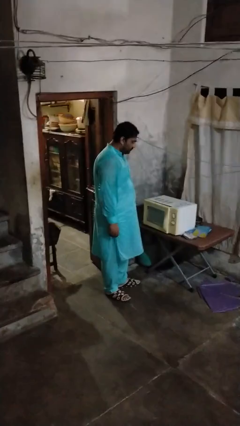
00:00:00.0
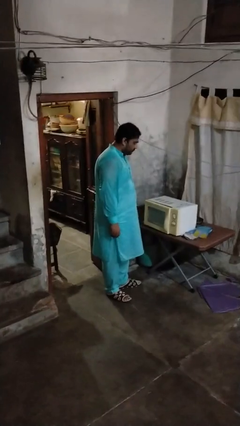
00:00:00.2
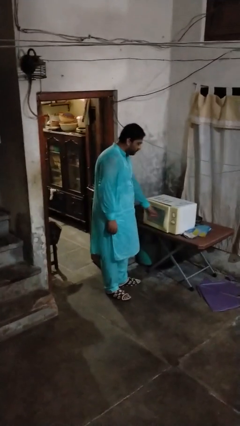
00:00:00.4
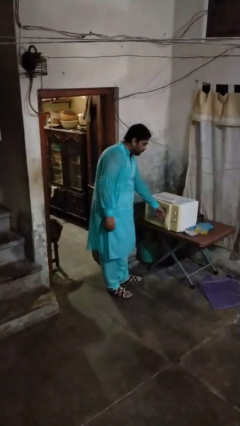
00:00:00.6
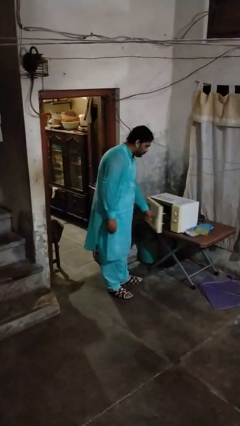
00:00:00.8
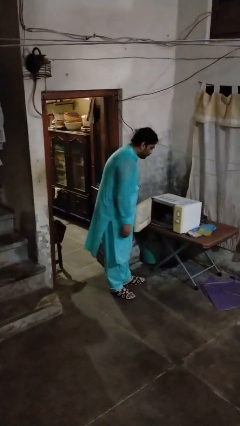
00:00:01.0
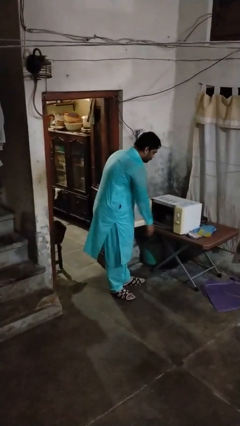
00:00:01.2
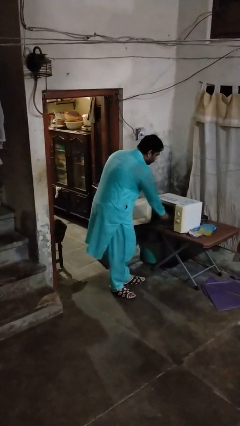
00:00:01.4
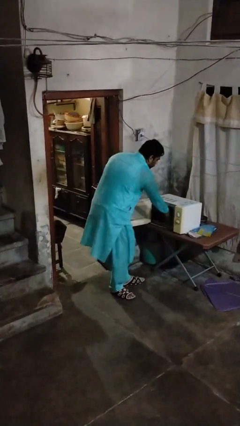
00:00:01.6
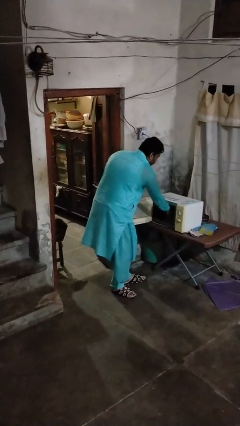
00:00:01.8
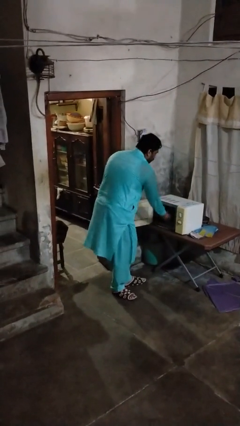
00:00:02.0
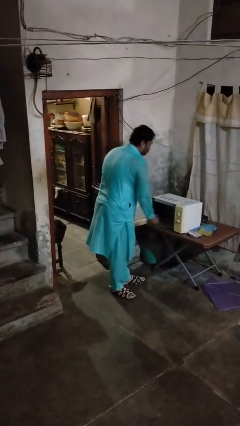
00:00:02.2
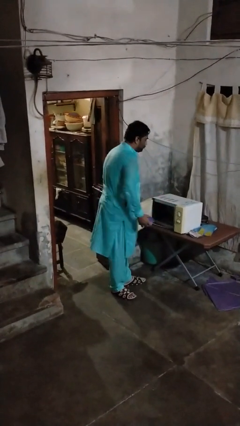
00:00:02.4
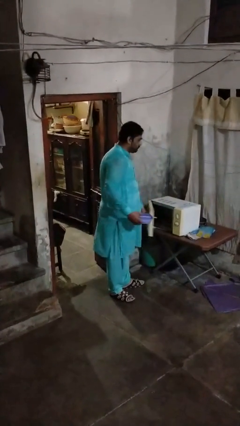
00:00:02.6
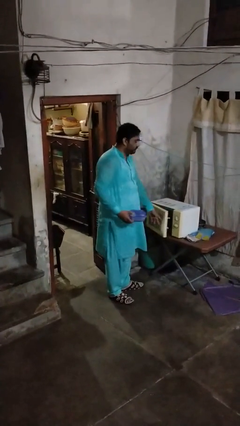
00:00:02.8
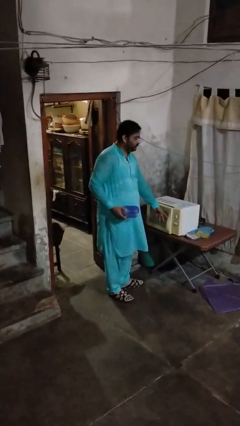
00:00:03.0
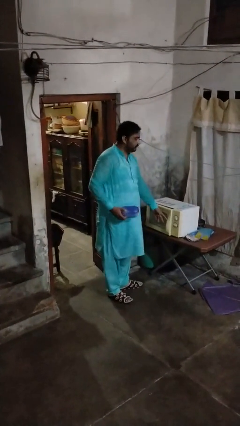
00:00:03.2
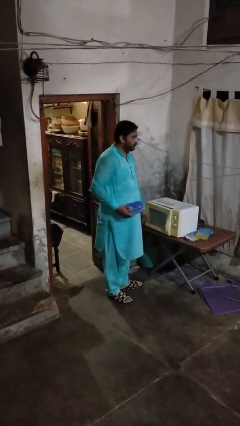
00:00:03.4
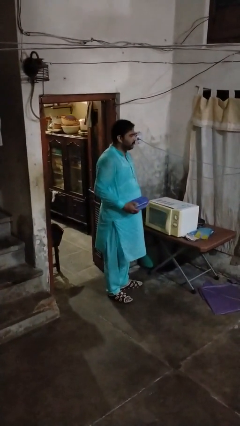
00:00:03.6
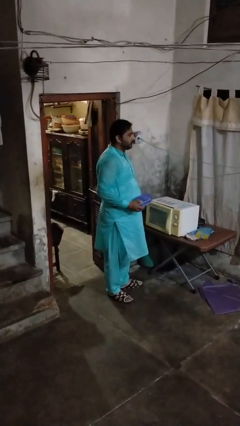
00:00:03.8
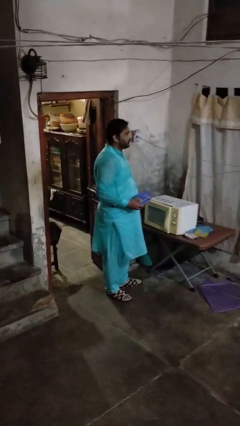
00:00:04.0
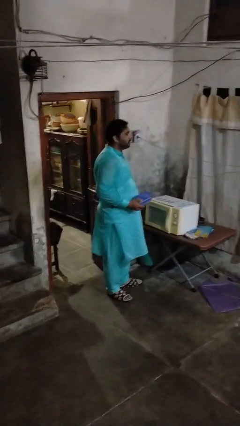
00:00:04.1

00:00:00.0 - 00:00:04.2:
person takes object from microwave

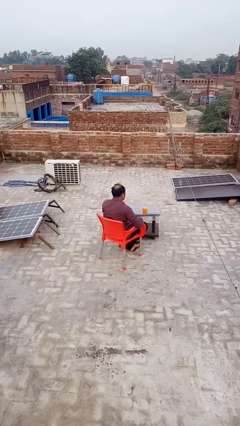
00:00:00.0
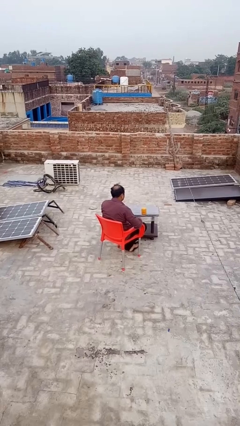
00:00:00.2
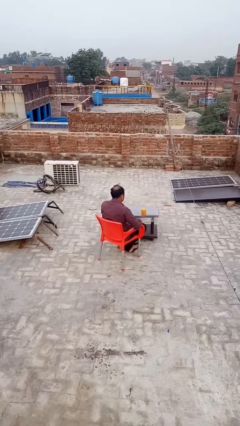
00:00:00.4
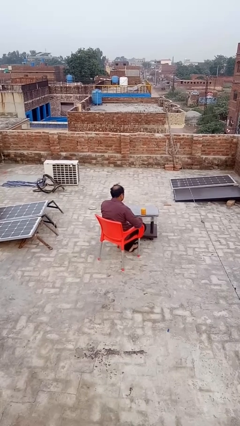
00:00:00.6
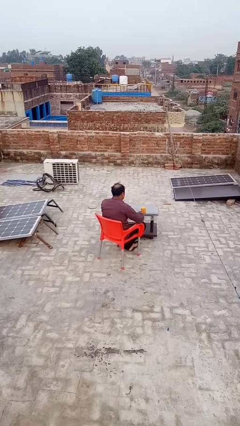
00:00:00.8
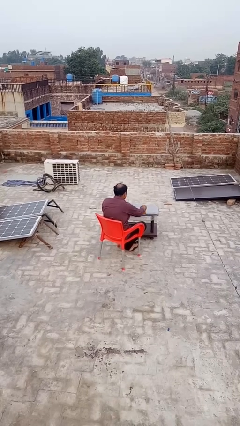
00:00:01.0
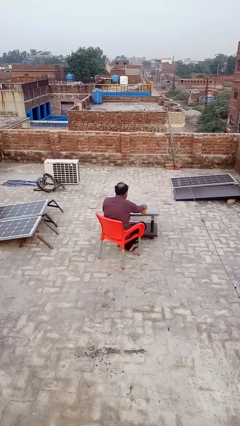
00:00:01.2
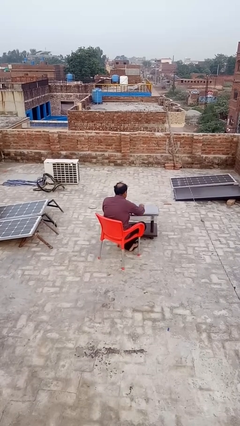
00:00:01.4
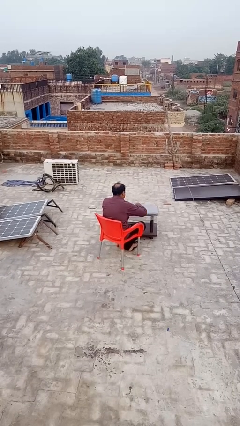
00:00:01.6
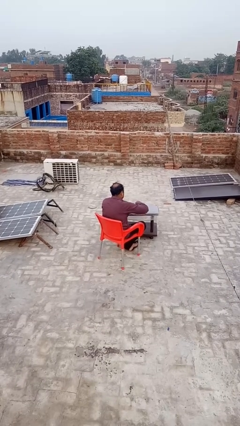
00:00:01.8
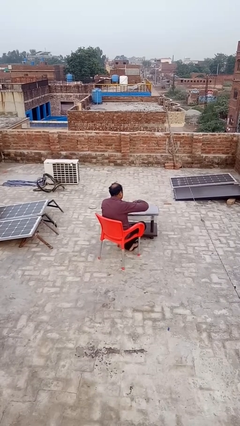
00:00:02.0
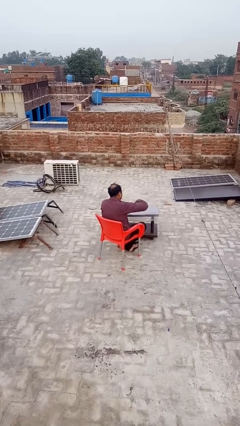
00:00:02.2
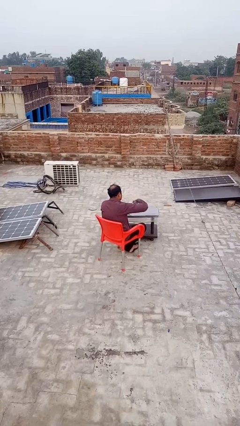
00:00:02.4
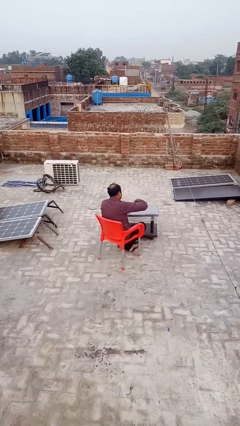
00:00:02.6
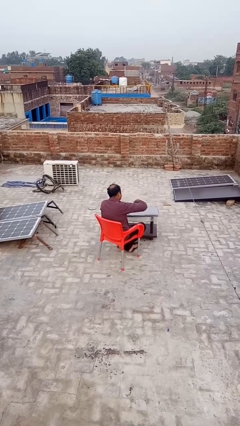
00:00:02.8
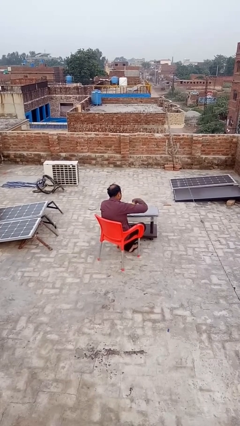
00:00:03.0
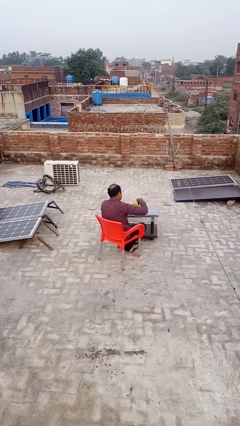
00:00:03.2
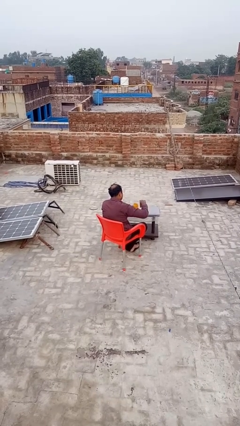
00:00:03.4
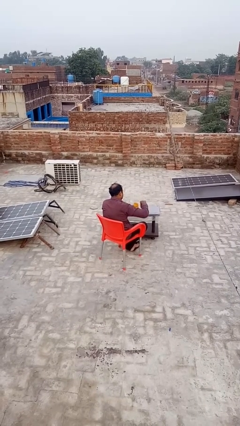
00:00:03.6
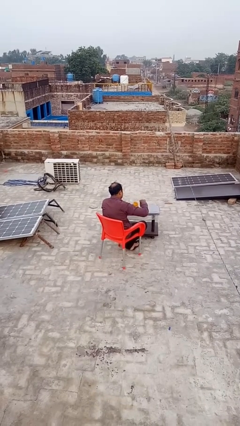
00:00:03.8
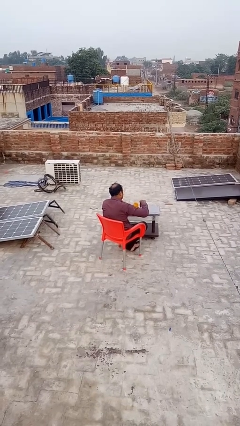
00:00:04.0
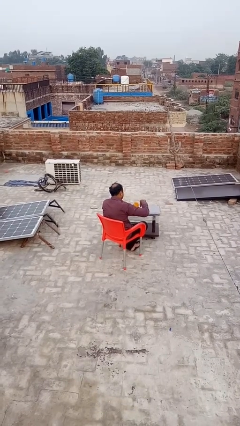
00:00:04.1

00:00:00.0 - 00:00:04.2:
person opens jar

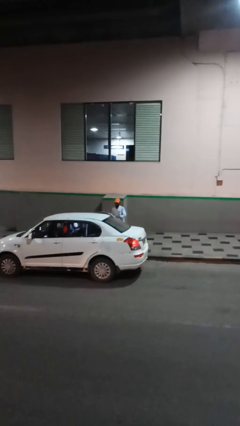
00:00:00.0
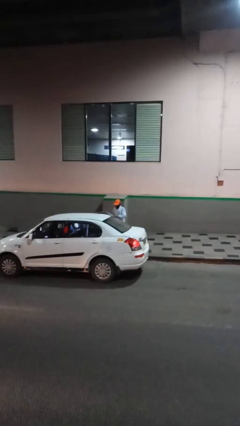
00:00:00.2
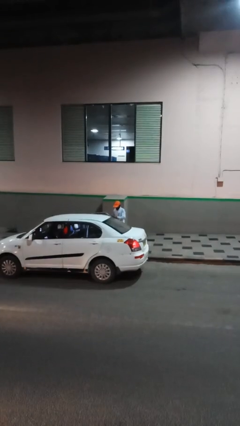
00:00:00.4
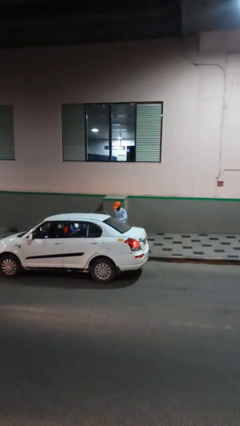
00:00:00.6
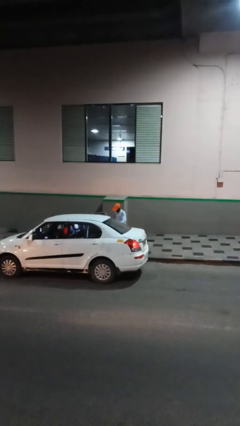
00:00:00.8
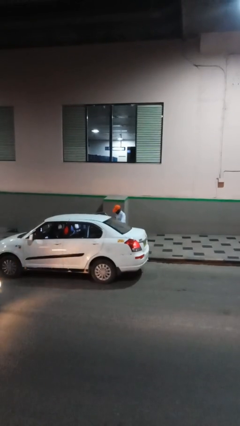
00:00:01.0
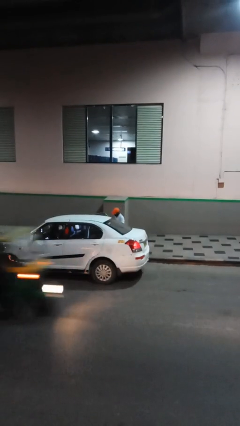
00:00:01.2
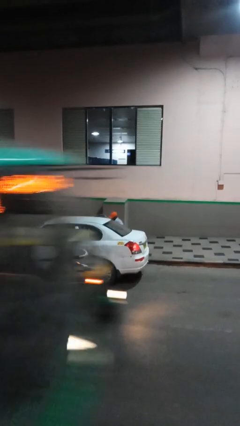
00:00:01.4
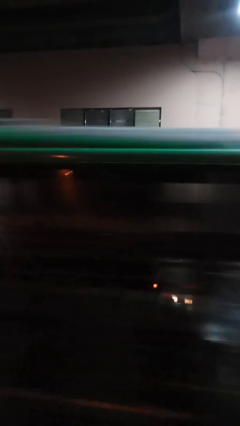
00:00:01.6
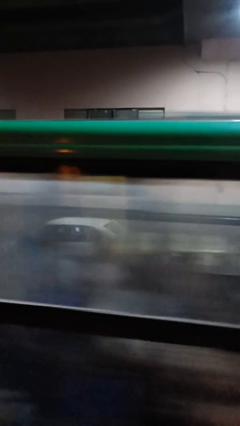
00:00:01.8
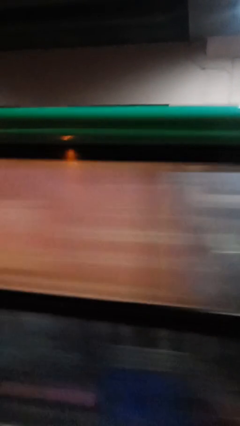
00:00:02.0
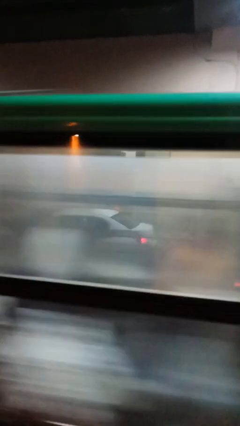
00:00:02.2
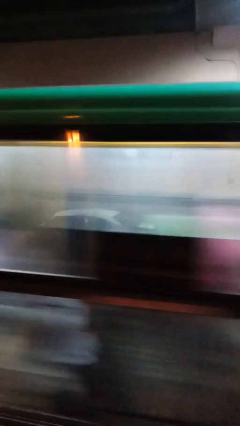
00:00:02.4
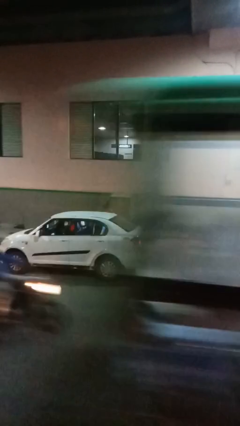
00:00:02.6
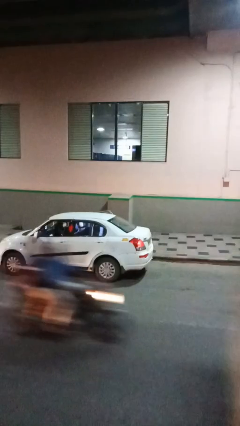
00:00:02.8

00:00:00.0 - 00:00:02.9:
person enters car

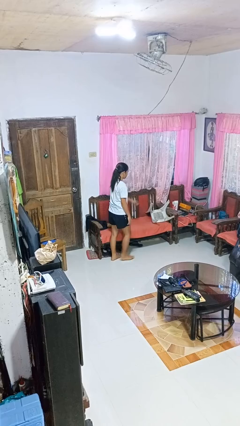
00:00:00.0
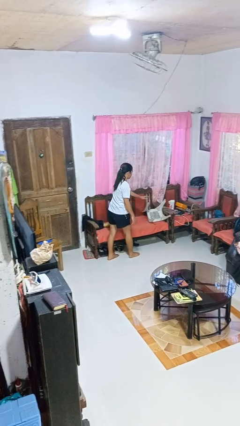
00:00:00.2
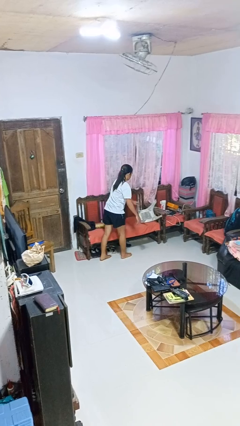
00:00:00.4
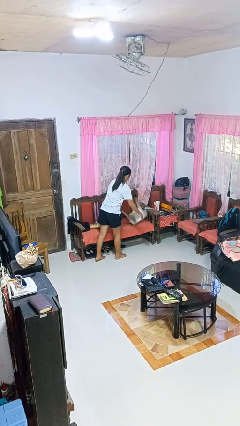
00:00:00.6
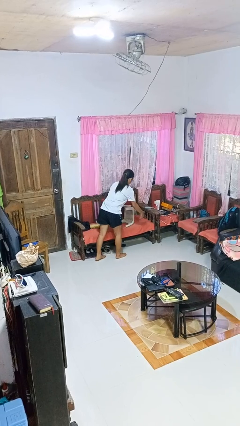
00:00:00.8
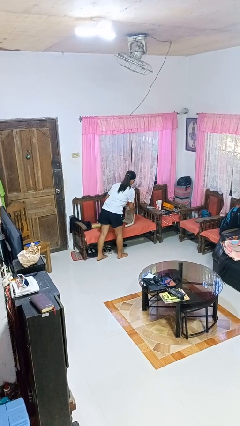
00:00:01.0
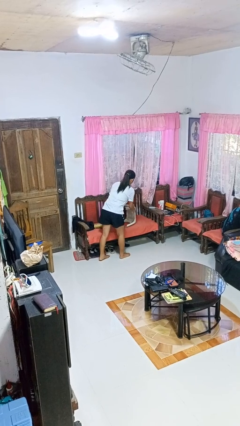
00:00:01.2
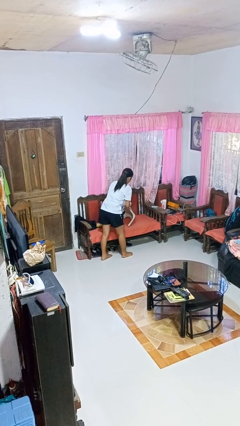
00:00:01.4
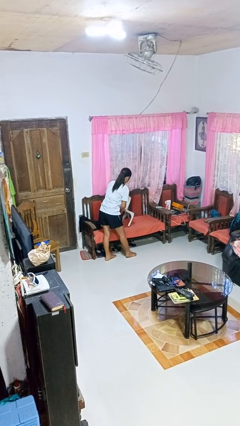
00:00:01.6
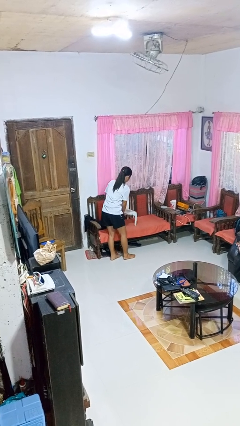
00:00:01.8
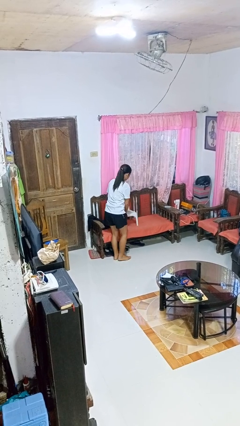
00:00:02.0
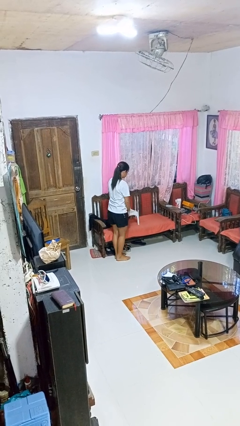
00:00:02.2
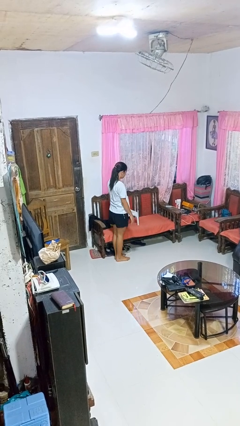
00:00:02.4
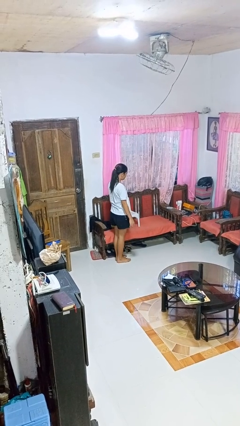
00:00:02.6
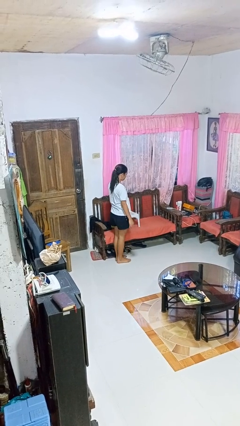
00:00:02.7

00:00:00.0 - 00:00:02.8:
person sets upright furniture

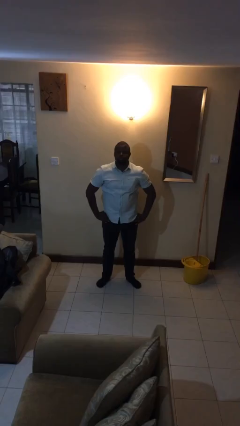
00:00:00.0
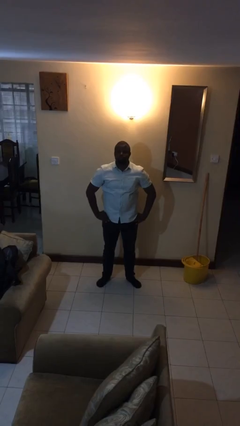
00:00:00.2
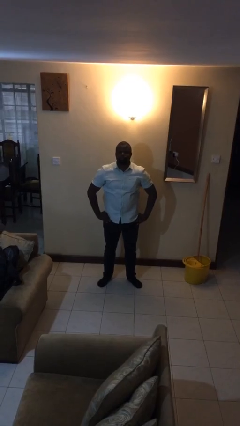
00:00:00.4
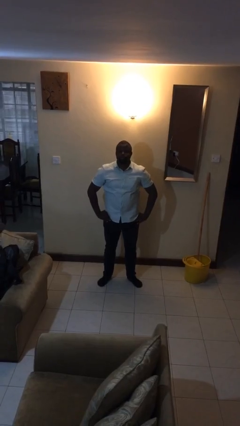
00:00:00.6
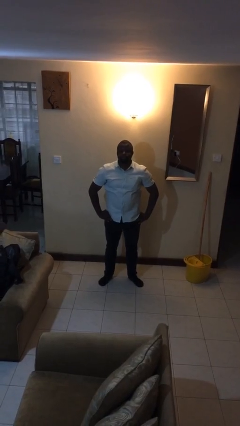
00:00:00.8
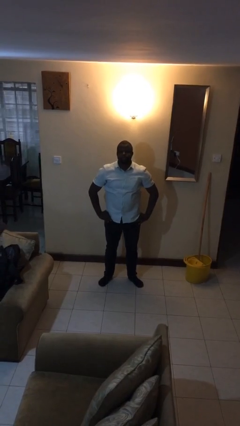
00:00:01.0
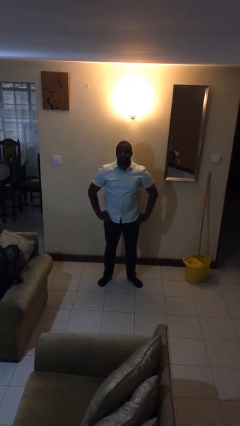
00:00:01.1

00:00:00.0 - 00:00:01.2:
person stands up

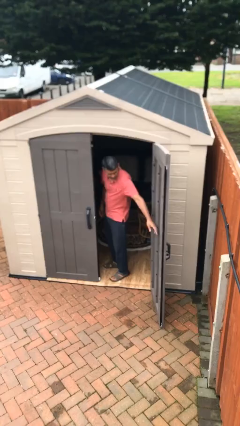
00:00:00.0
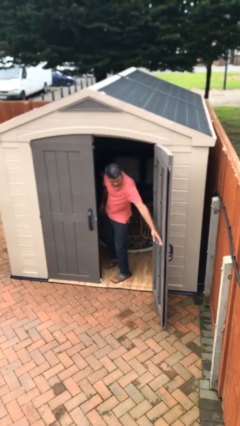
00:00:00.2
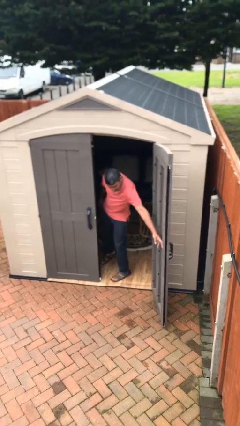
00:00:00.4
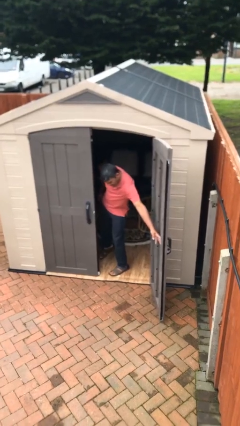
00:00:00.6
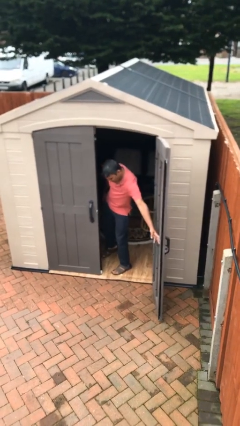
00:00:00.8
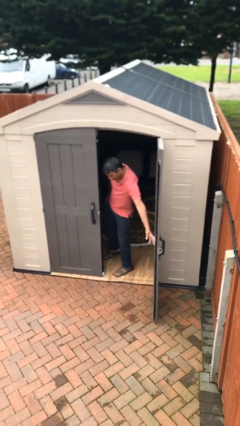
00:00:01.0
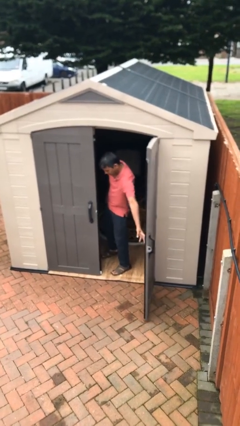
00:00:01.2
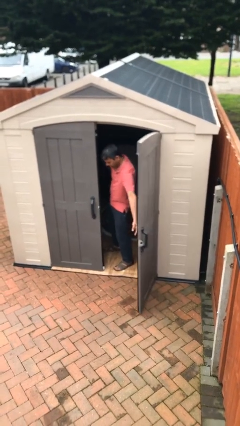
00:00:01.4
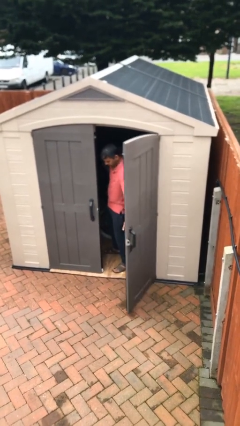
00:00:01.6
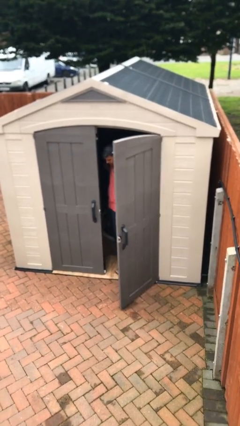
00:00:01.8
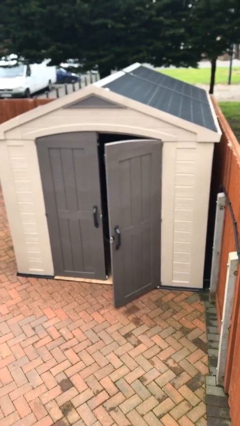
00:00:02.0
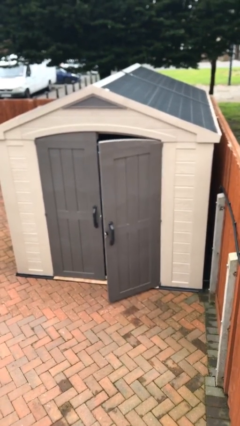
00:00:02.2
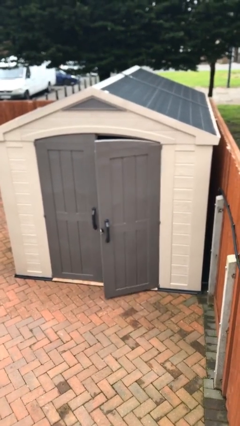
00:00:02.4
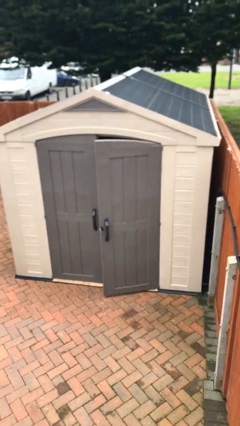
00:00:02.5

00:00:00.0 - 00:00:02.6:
person closes facility door
